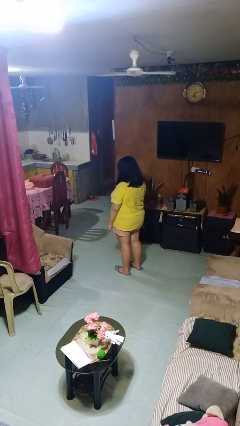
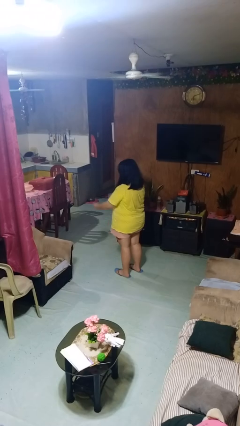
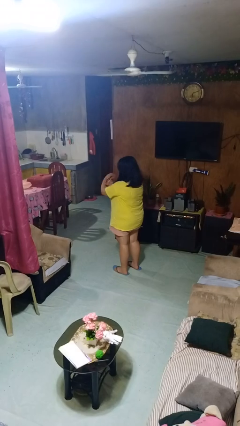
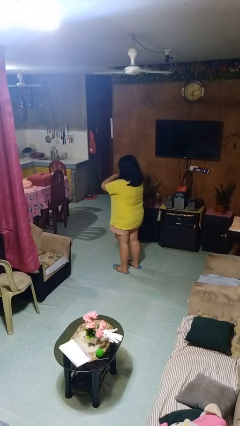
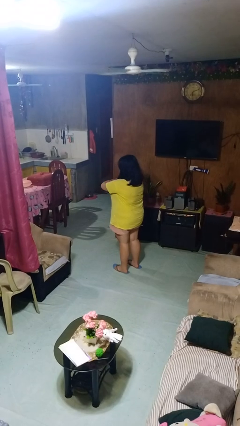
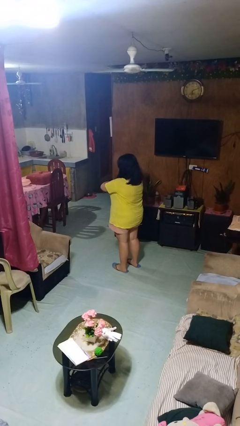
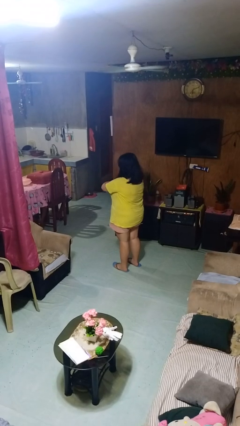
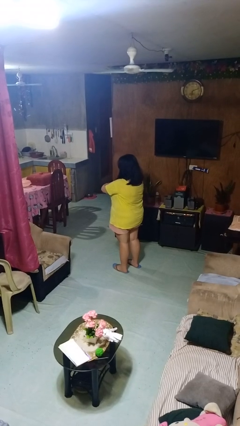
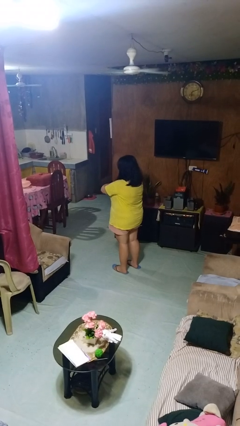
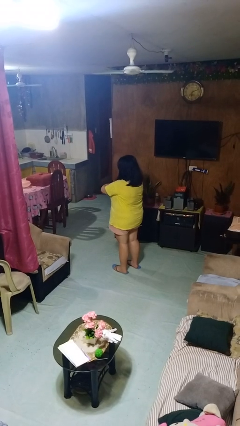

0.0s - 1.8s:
person crosses arms

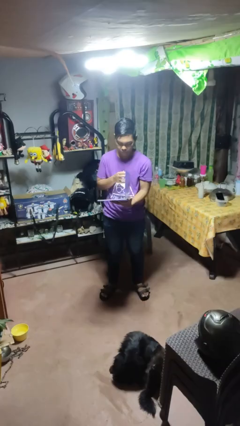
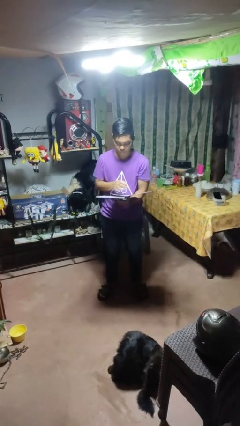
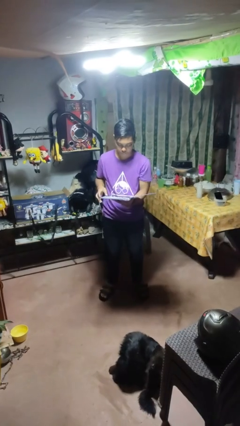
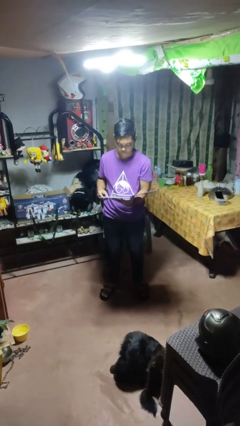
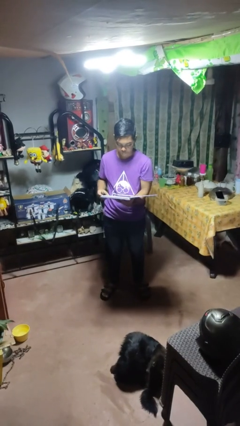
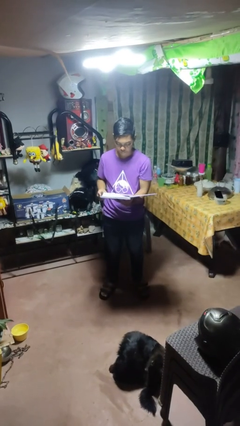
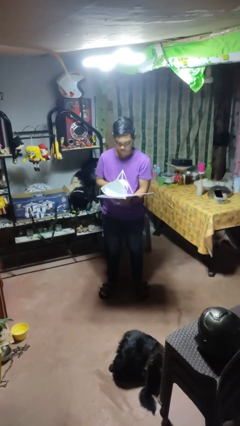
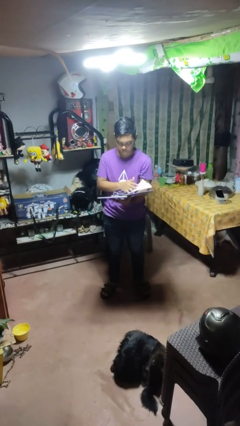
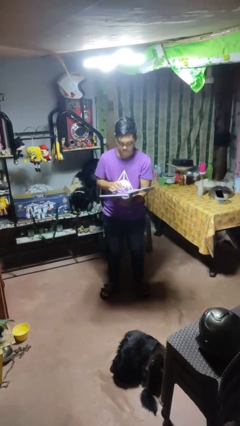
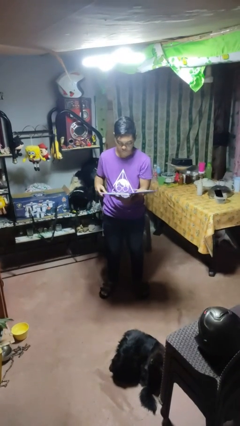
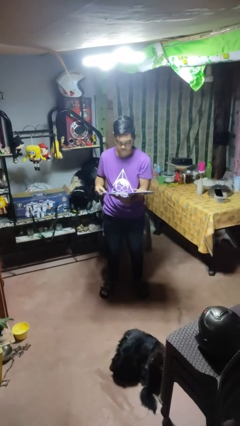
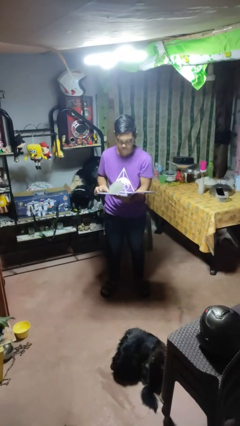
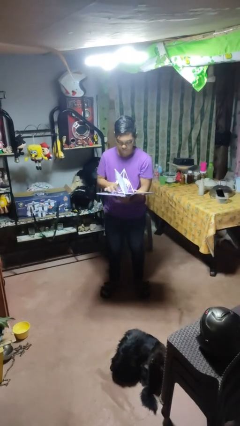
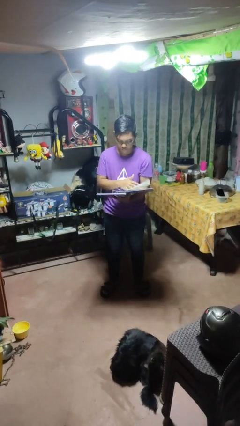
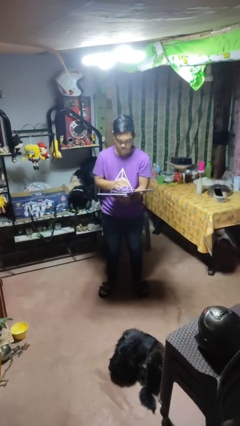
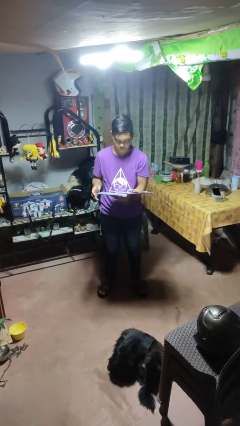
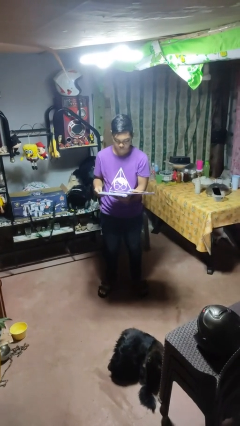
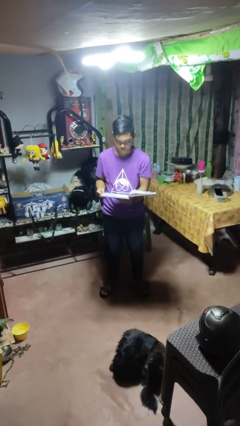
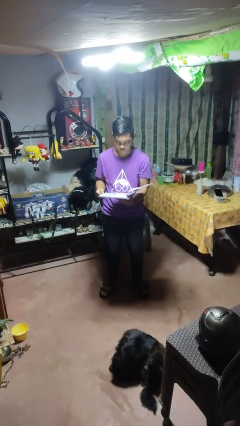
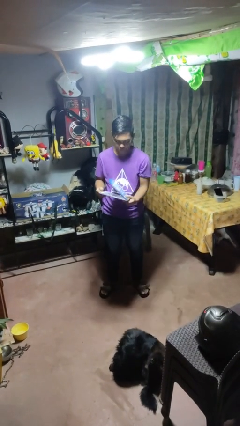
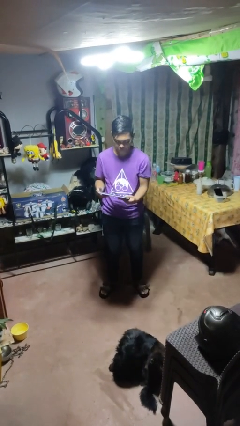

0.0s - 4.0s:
person reads magazine

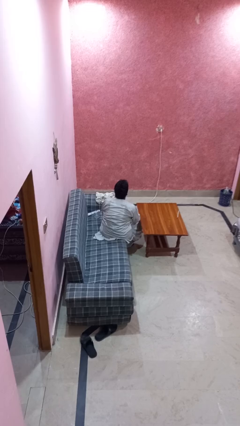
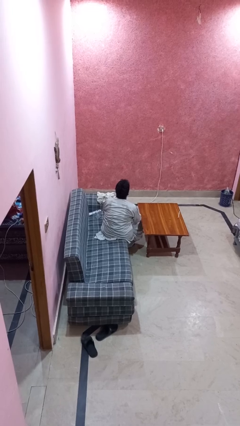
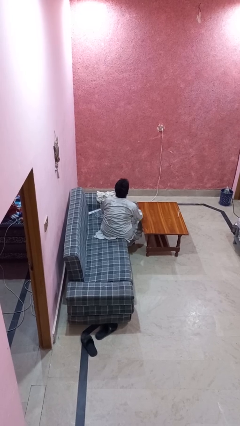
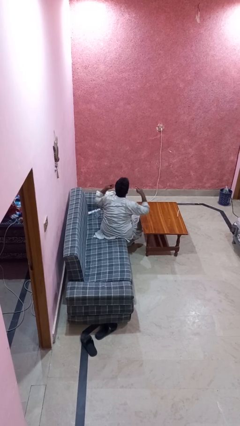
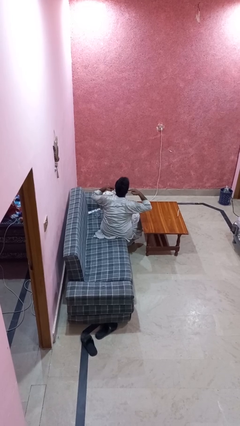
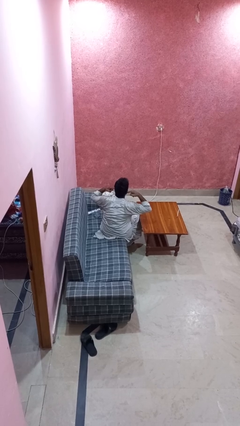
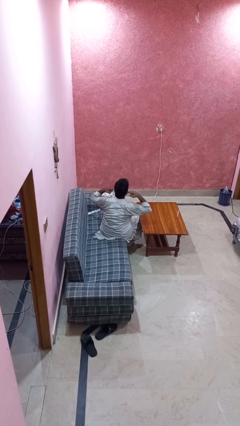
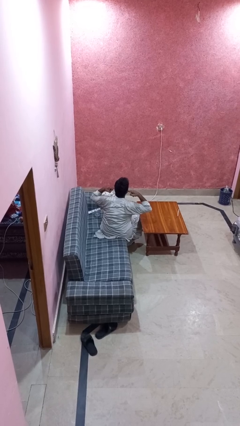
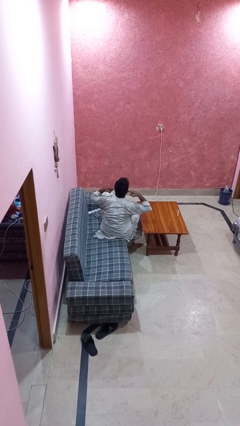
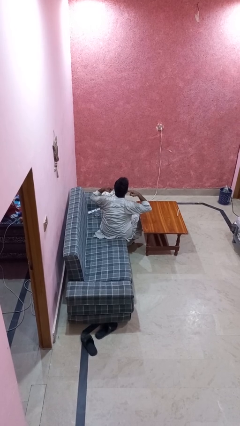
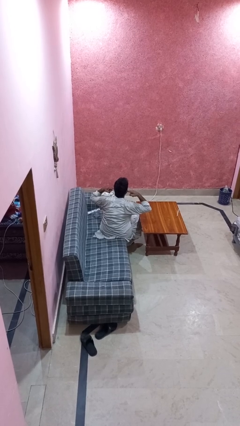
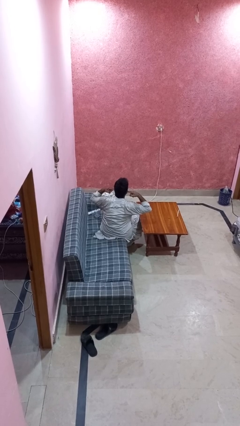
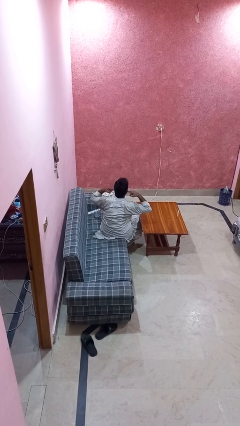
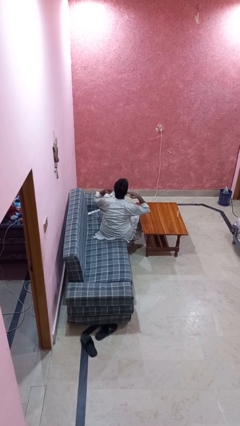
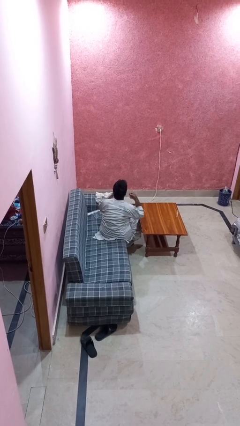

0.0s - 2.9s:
person puts fingers in ear

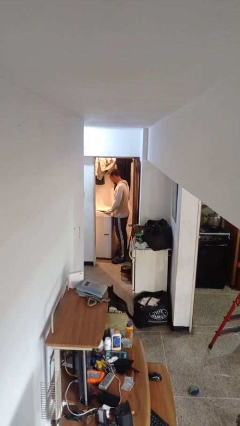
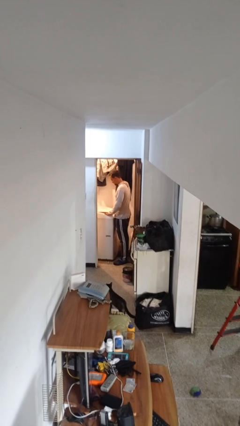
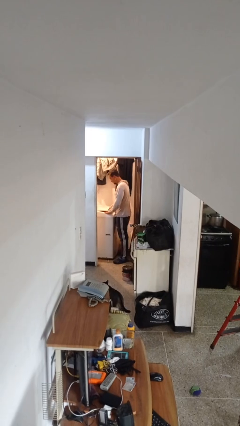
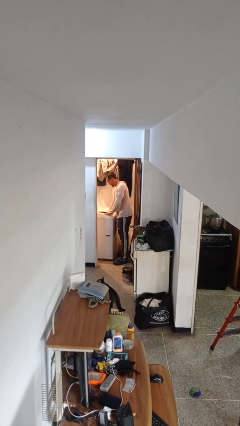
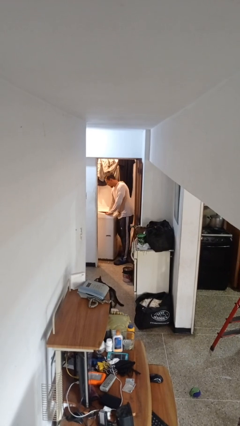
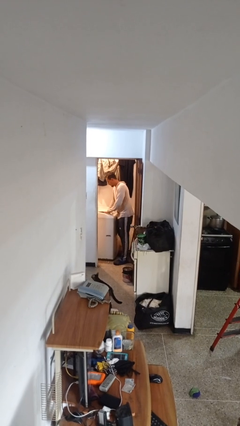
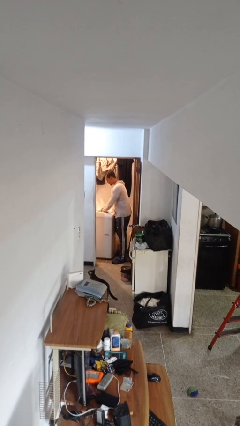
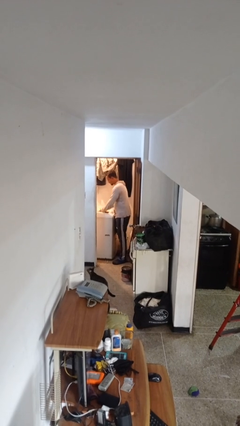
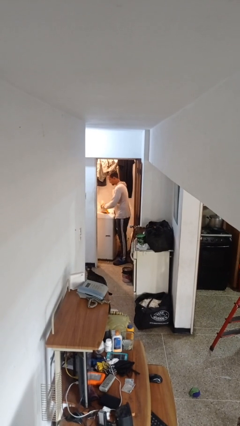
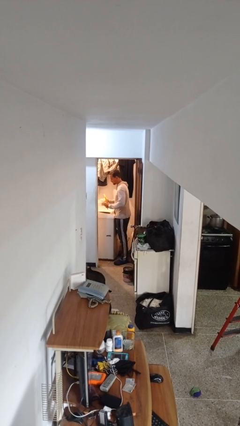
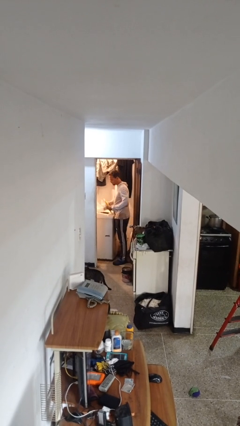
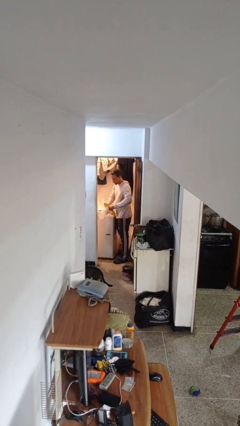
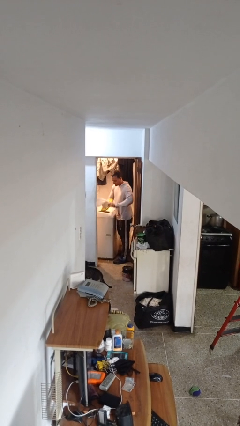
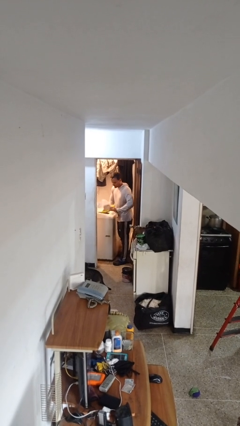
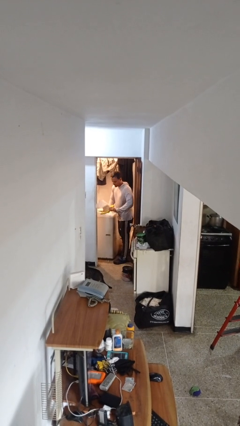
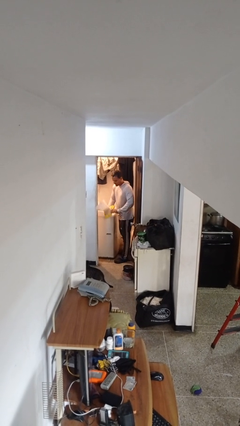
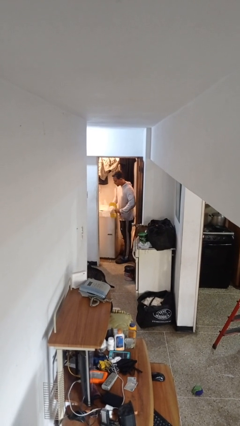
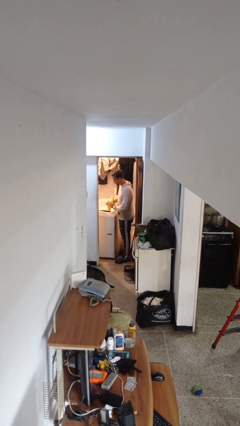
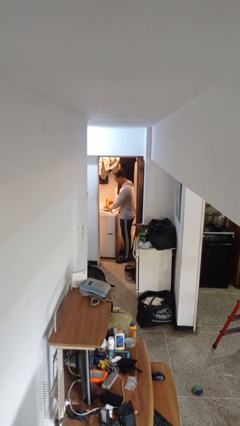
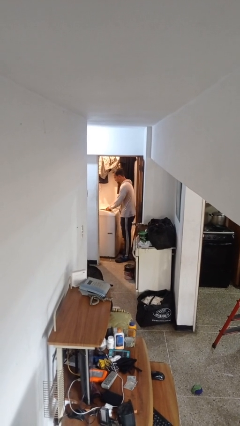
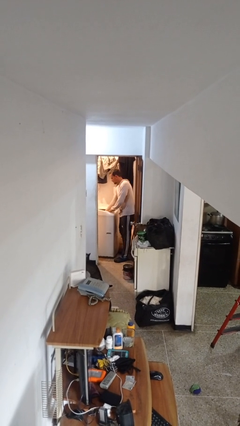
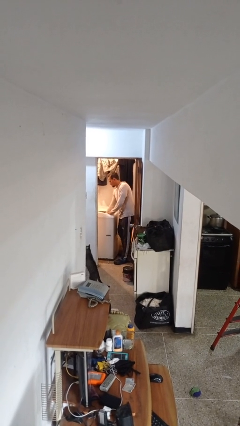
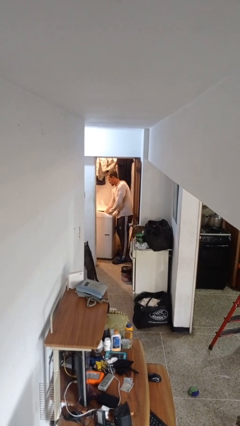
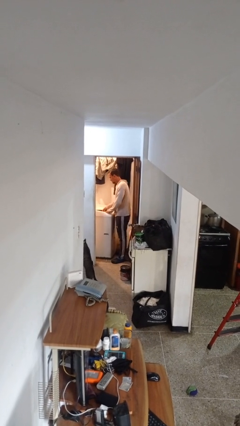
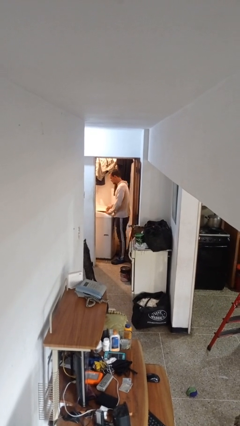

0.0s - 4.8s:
person cleans dryer lint trap

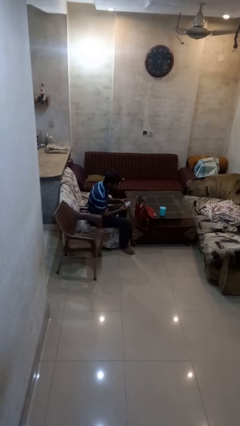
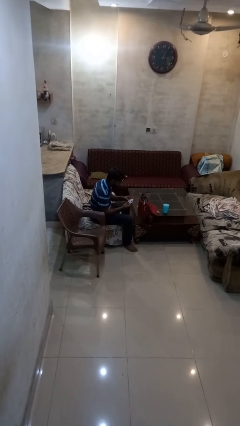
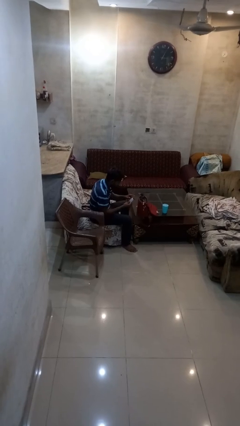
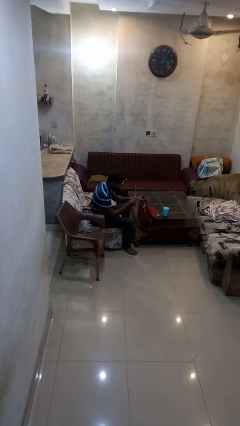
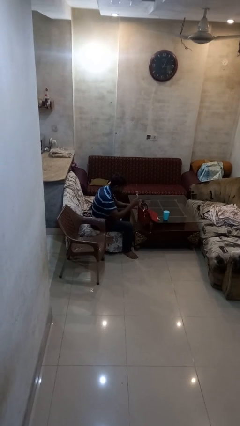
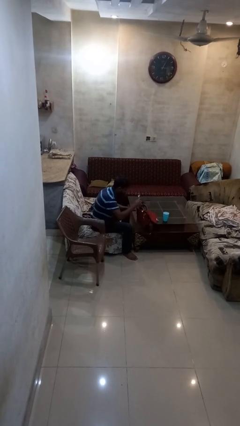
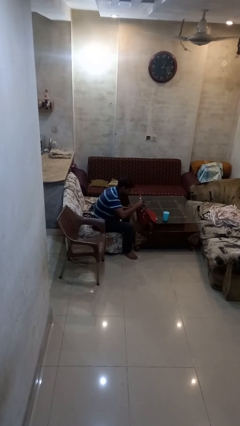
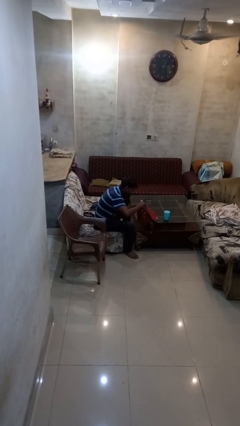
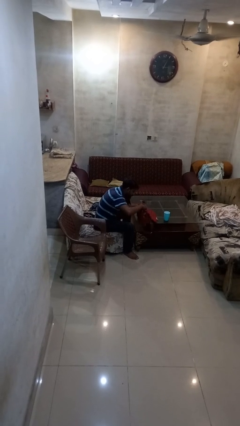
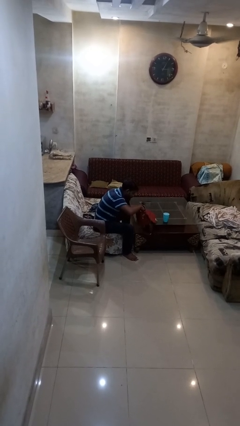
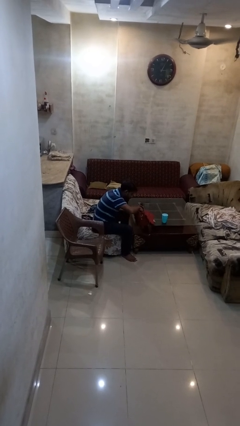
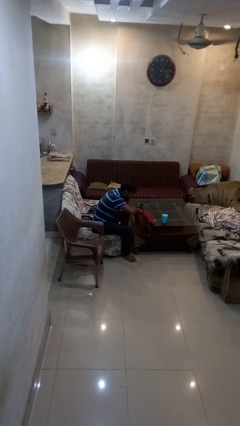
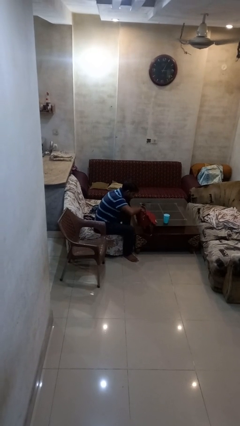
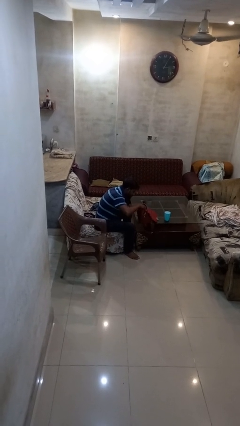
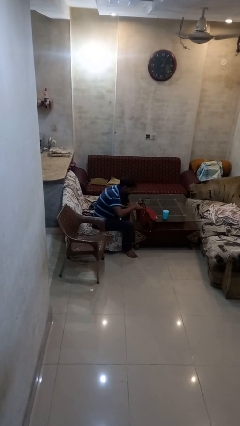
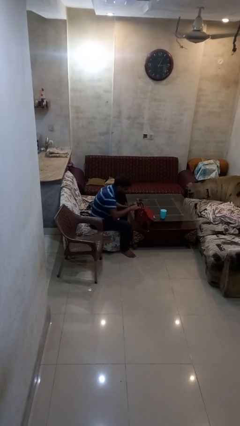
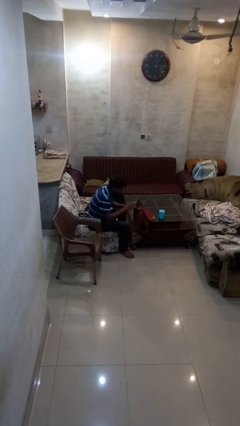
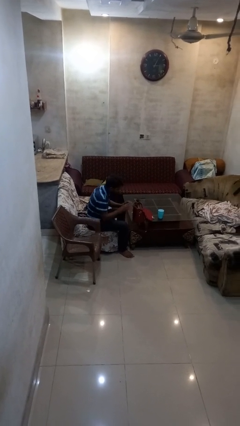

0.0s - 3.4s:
person puts object into purse
